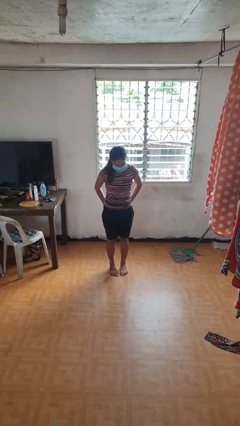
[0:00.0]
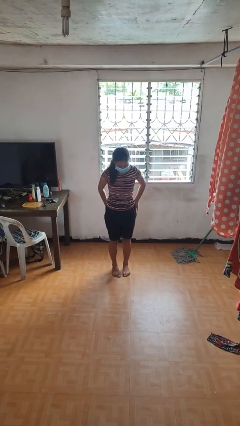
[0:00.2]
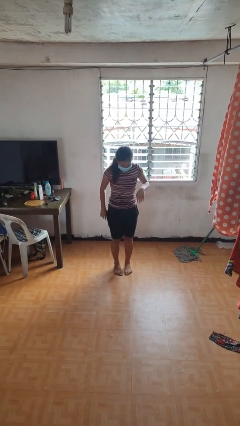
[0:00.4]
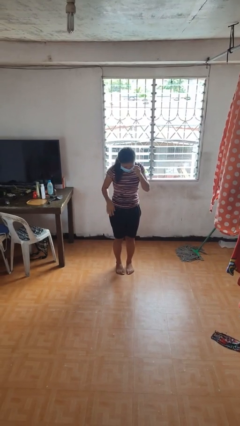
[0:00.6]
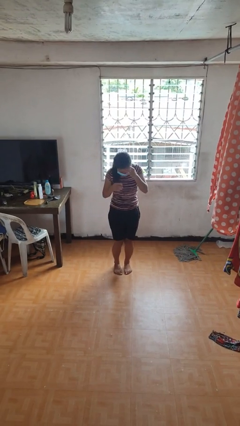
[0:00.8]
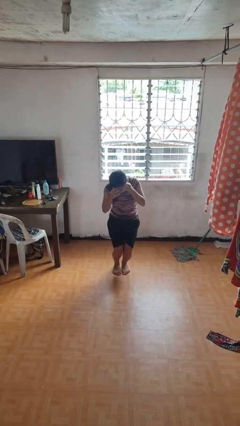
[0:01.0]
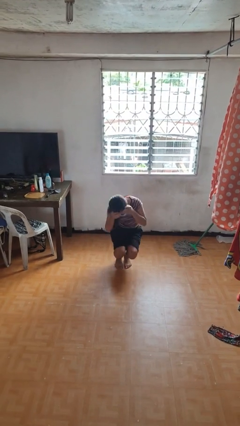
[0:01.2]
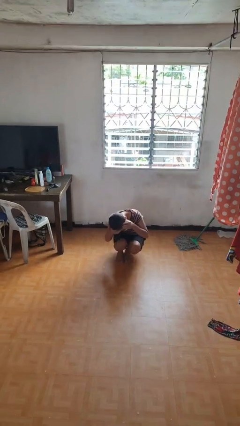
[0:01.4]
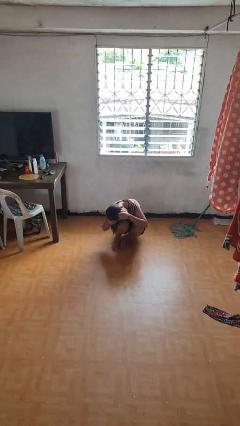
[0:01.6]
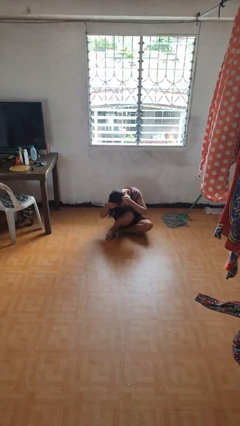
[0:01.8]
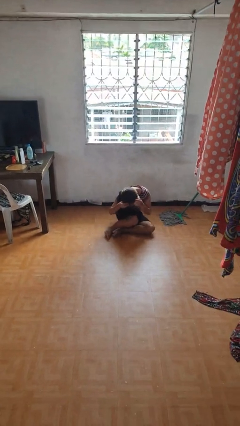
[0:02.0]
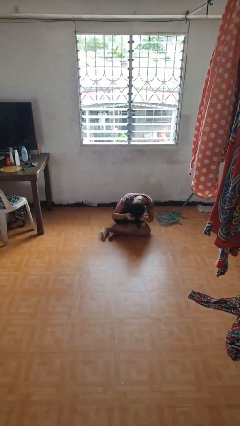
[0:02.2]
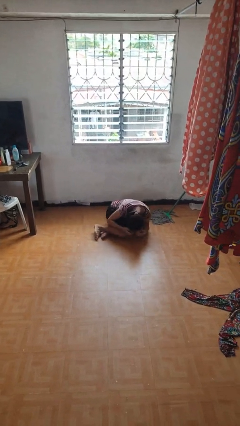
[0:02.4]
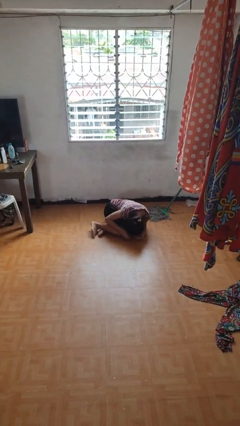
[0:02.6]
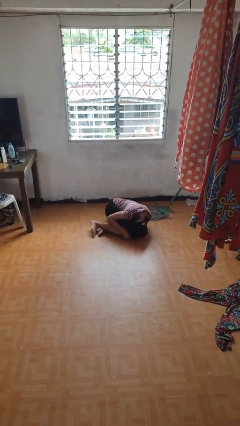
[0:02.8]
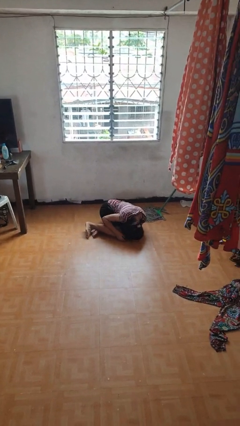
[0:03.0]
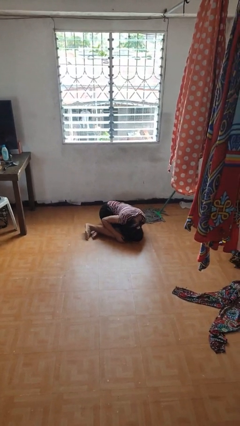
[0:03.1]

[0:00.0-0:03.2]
person falls while standing

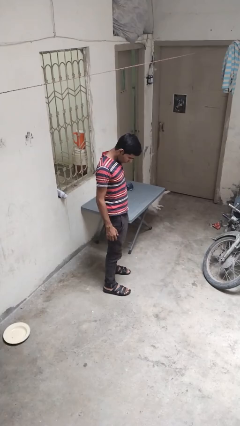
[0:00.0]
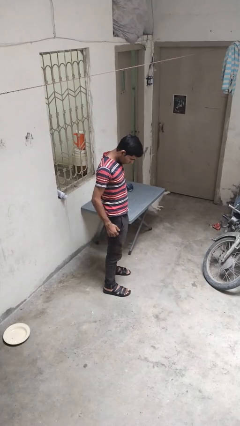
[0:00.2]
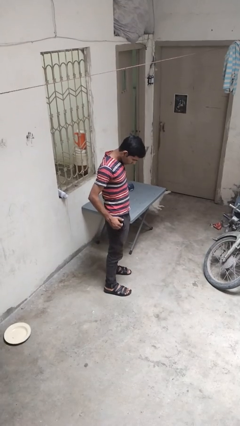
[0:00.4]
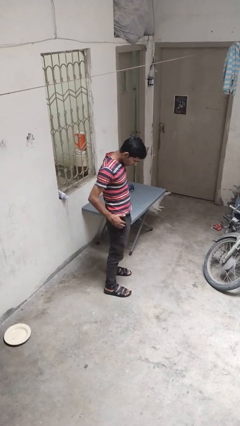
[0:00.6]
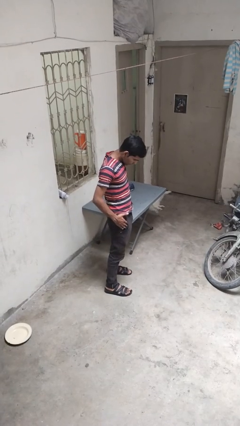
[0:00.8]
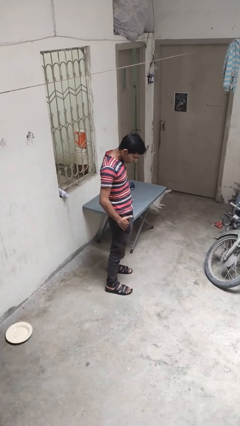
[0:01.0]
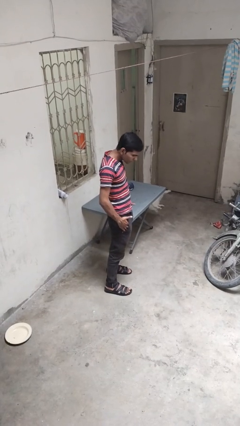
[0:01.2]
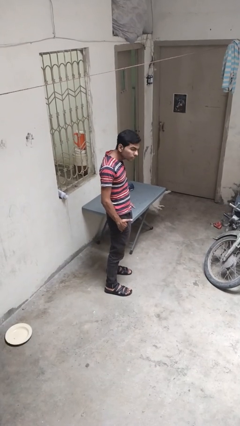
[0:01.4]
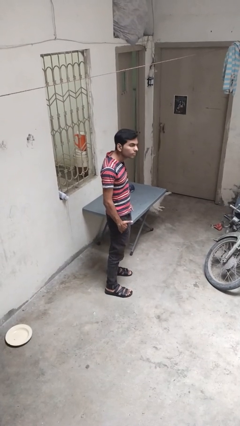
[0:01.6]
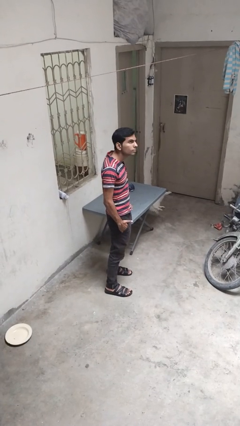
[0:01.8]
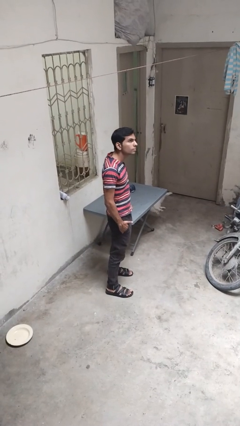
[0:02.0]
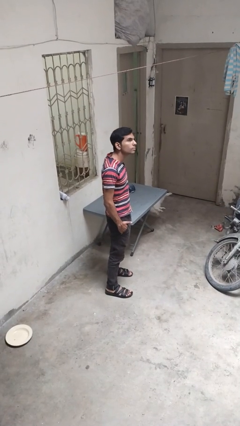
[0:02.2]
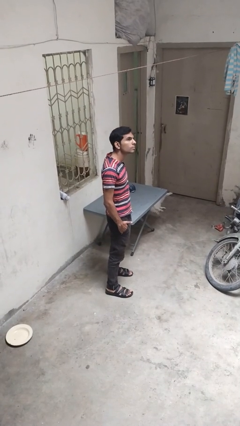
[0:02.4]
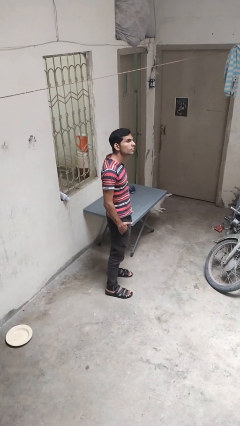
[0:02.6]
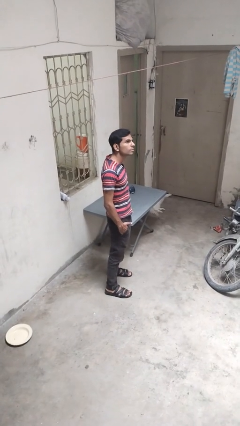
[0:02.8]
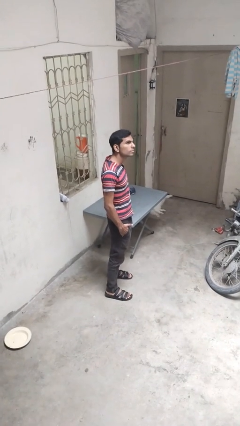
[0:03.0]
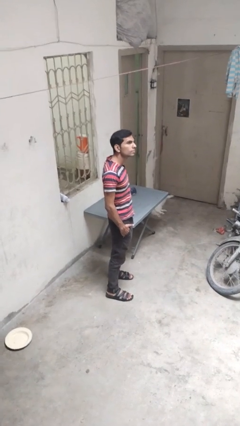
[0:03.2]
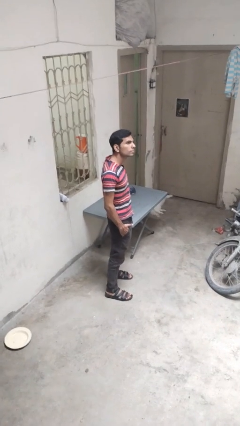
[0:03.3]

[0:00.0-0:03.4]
person puts hands in back pockets

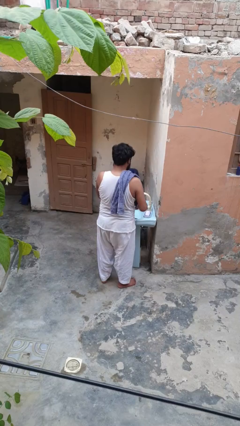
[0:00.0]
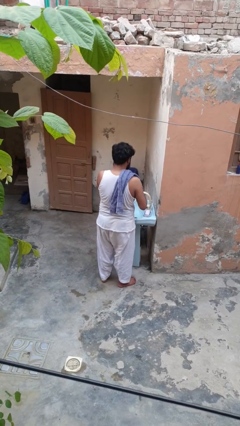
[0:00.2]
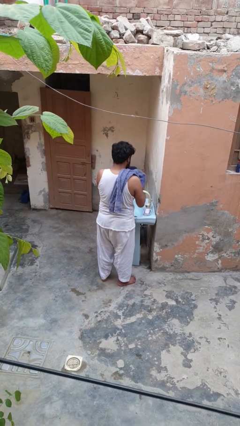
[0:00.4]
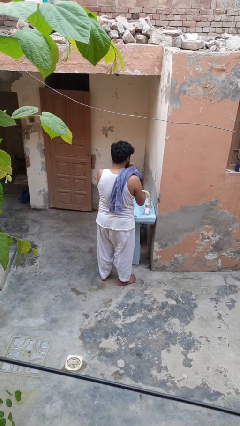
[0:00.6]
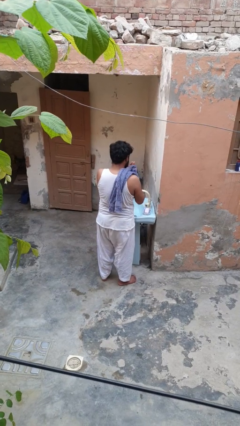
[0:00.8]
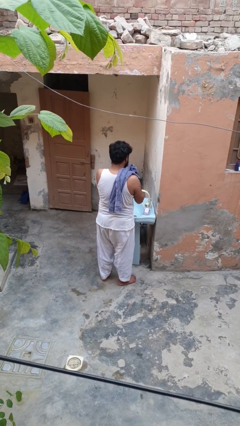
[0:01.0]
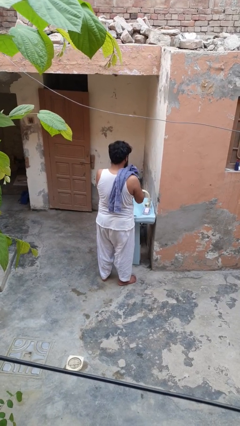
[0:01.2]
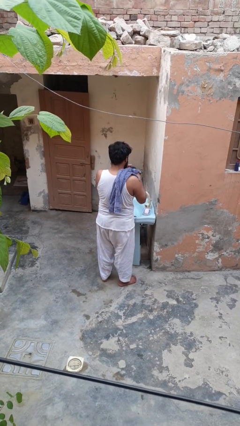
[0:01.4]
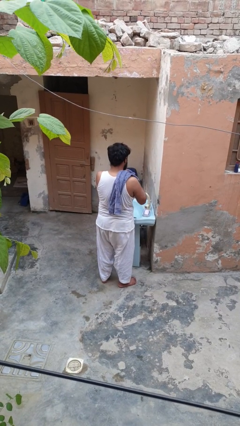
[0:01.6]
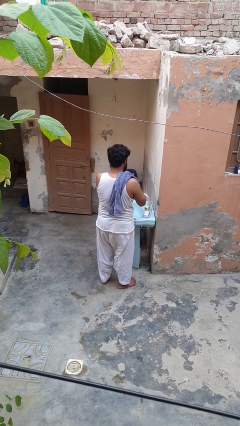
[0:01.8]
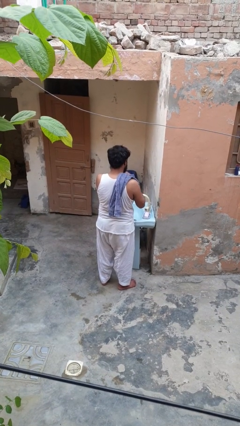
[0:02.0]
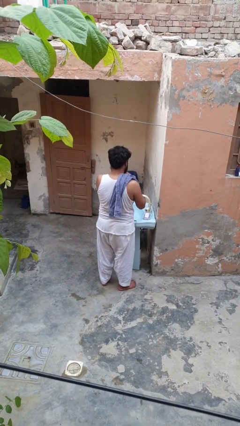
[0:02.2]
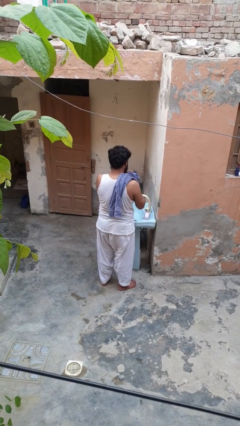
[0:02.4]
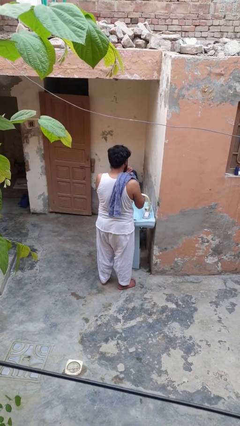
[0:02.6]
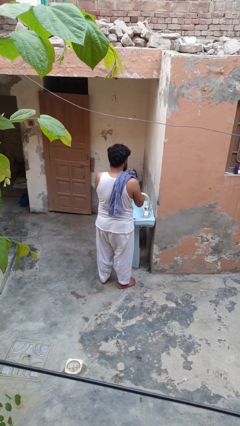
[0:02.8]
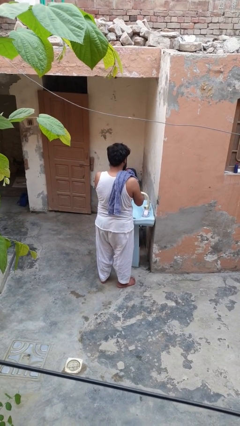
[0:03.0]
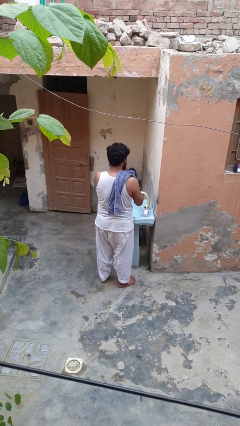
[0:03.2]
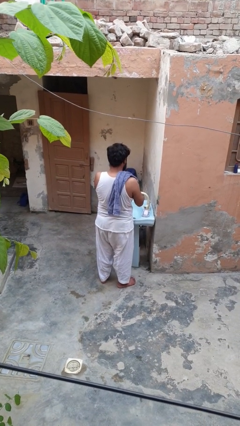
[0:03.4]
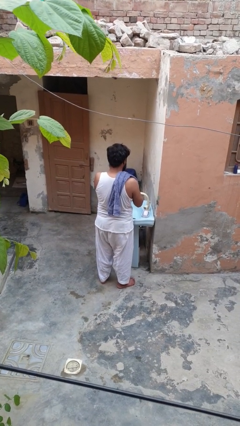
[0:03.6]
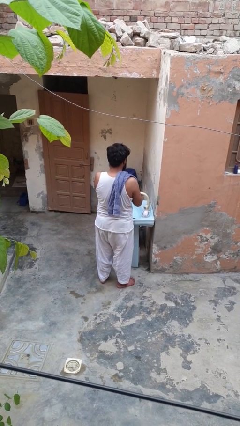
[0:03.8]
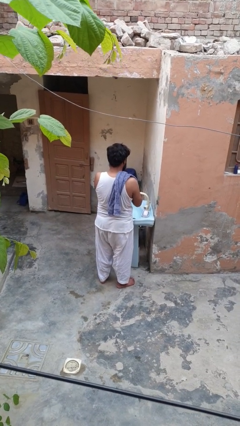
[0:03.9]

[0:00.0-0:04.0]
person dries hands with towel

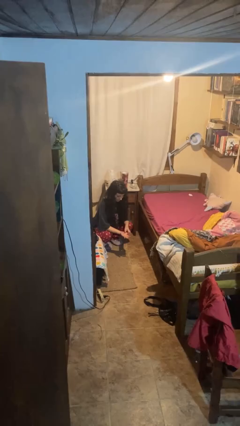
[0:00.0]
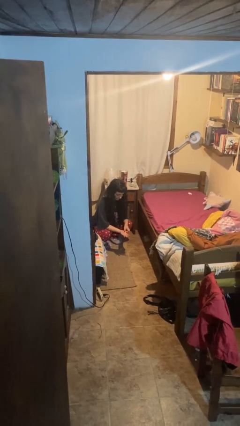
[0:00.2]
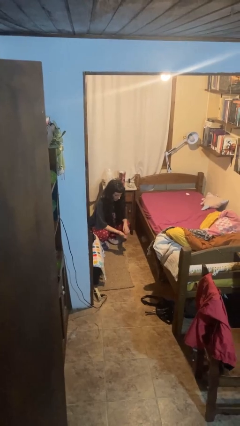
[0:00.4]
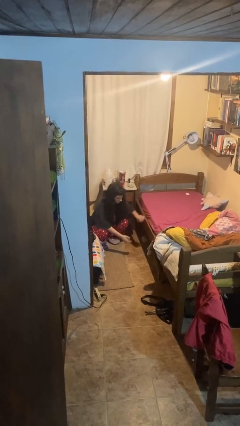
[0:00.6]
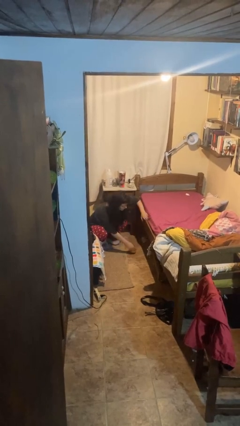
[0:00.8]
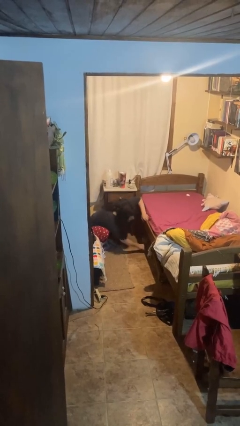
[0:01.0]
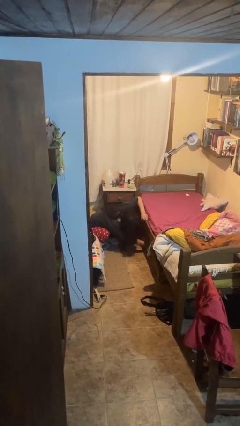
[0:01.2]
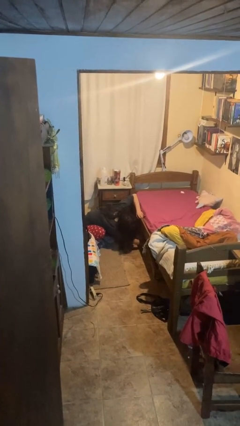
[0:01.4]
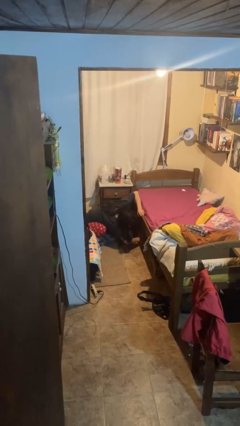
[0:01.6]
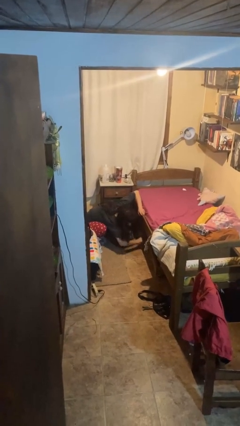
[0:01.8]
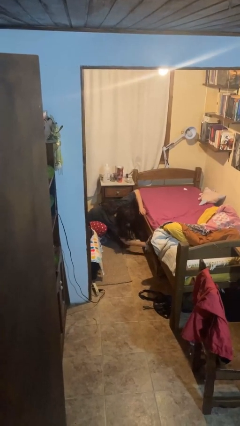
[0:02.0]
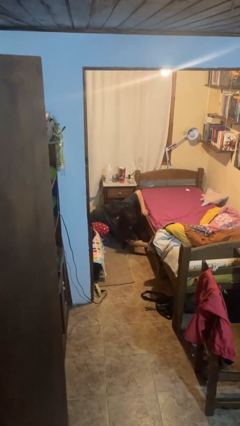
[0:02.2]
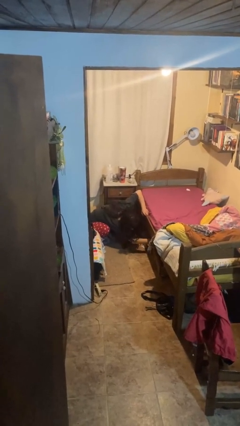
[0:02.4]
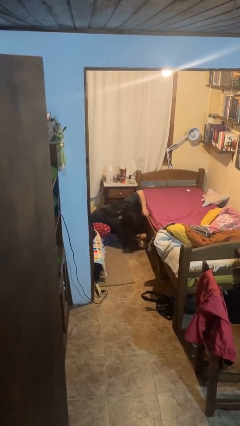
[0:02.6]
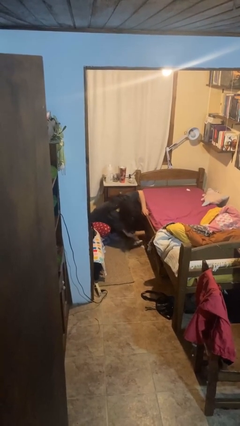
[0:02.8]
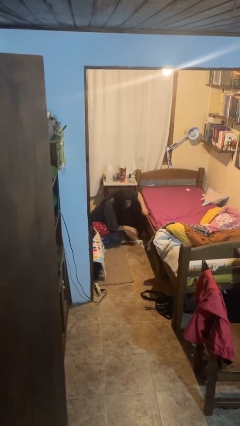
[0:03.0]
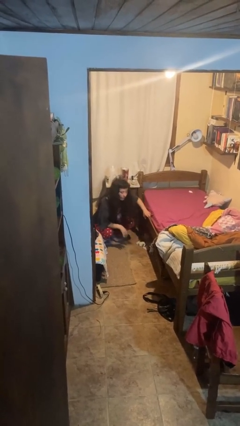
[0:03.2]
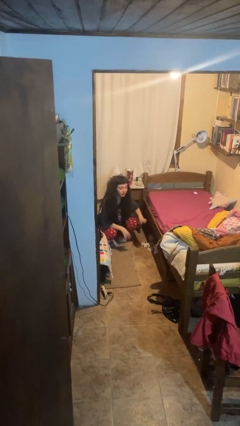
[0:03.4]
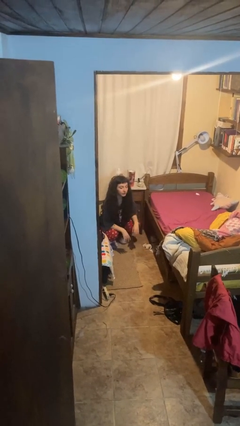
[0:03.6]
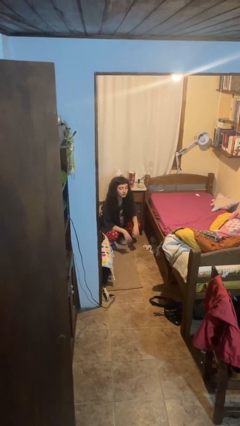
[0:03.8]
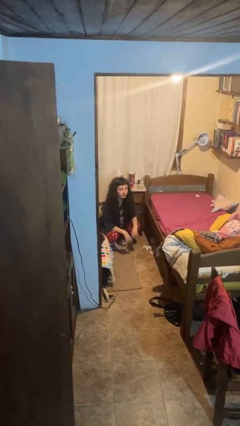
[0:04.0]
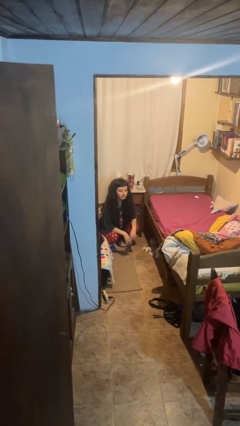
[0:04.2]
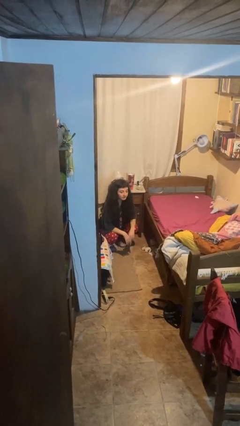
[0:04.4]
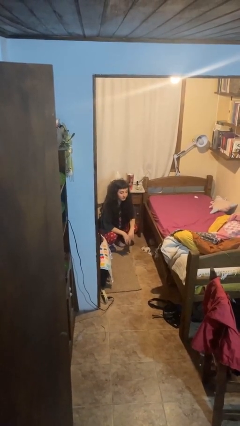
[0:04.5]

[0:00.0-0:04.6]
person searches under bed

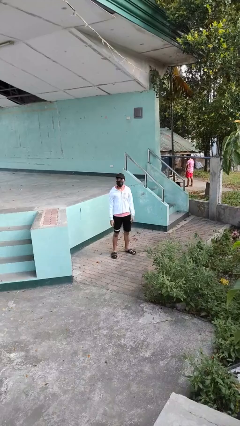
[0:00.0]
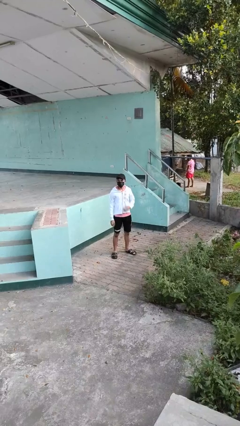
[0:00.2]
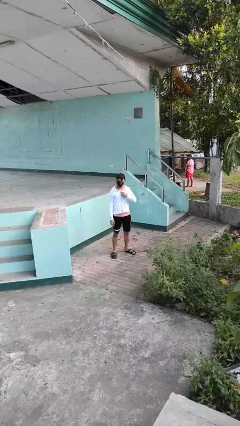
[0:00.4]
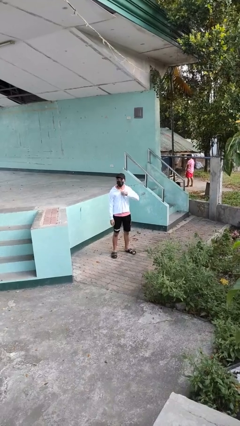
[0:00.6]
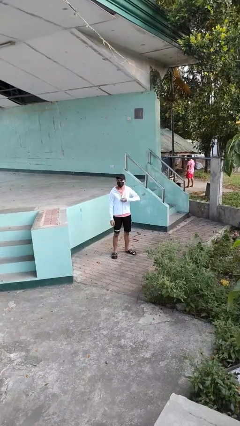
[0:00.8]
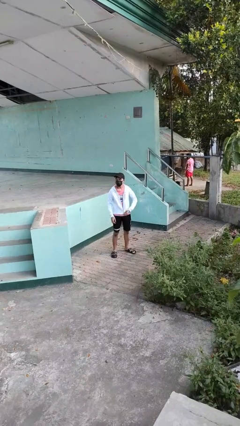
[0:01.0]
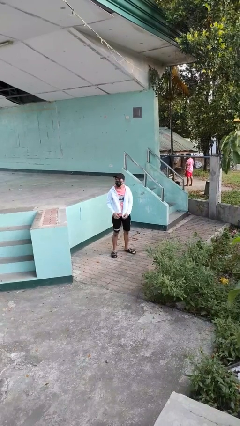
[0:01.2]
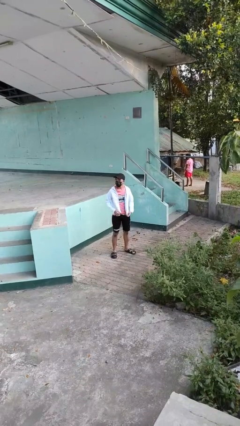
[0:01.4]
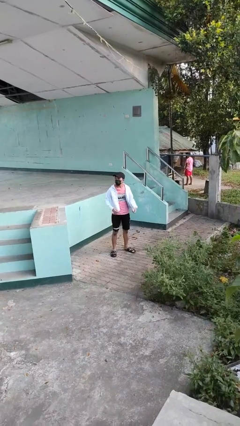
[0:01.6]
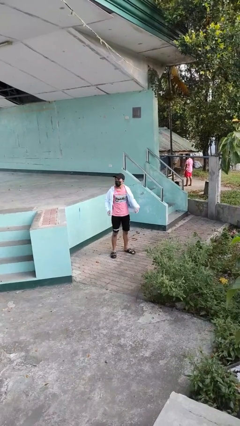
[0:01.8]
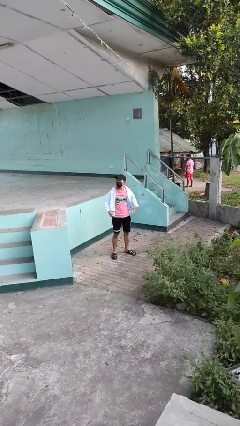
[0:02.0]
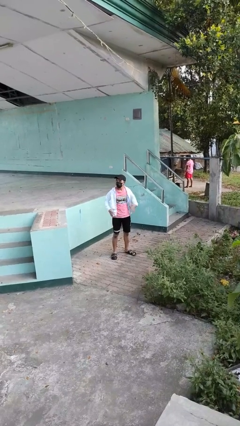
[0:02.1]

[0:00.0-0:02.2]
person unzips jacket
